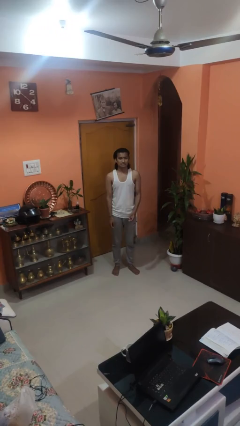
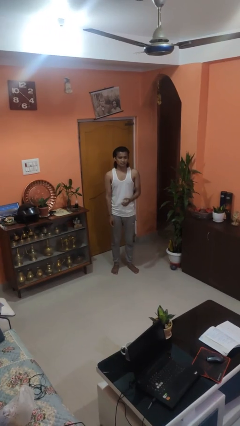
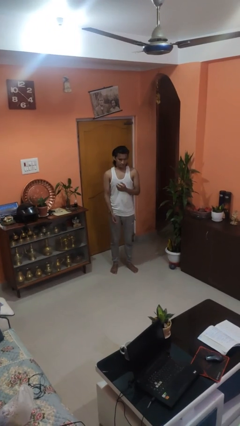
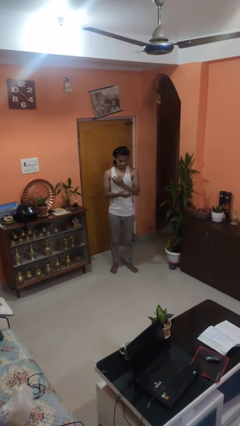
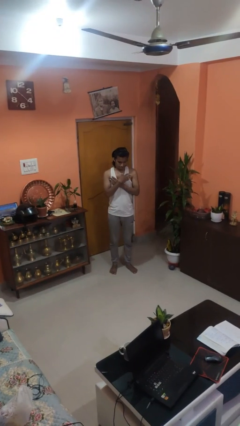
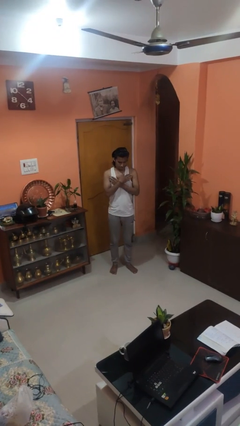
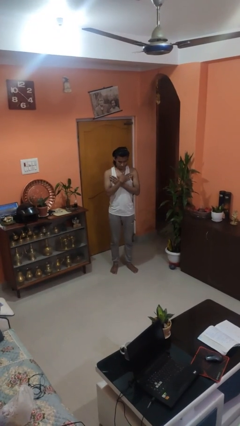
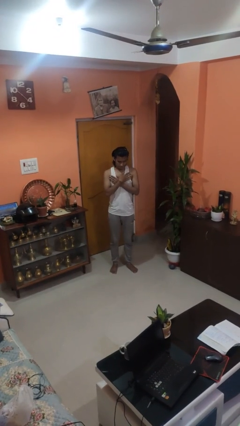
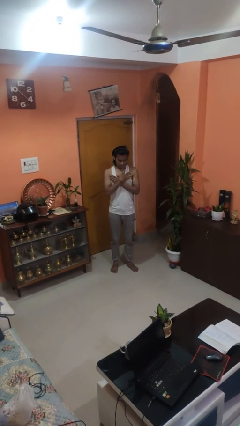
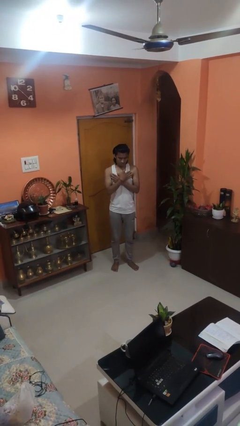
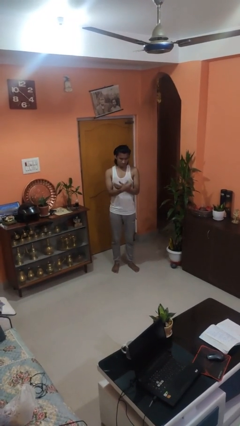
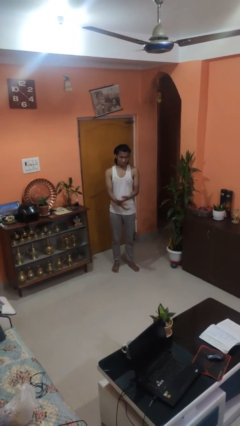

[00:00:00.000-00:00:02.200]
person drums on chest

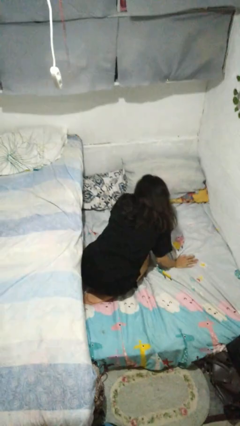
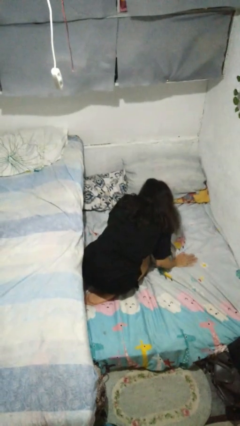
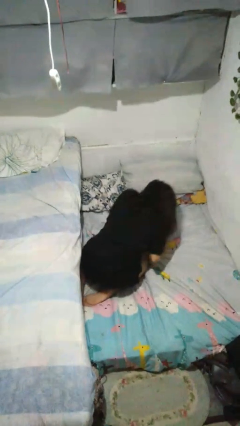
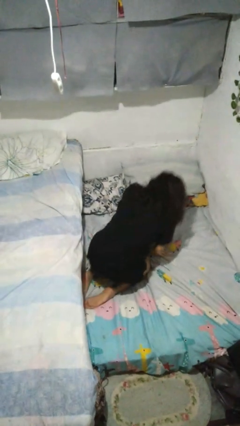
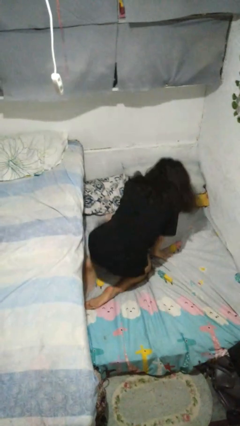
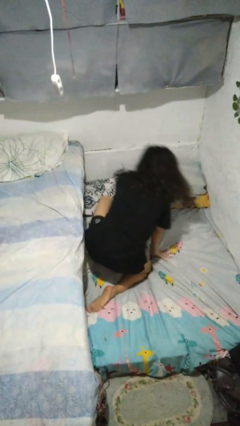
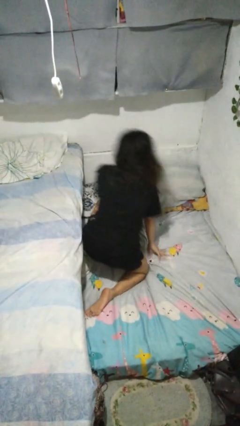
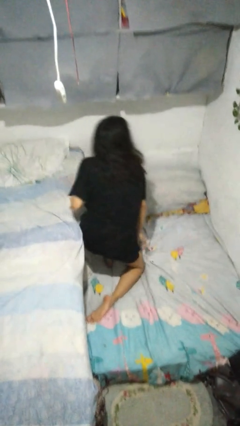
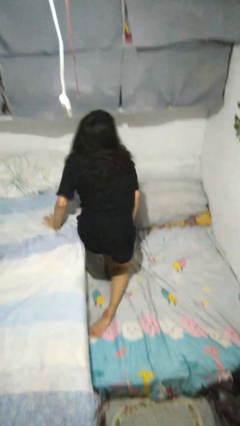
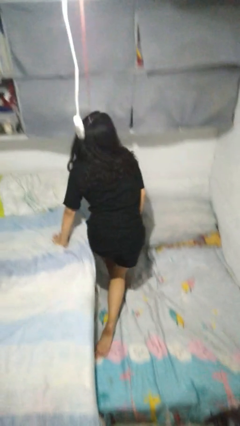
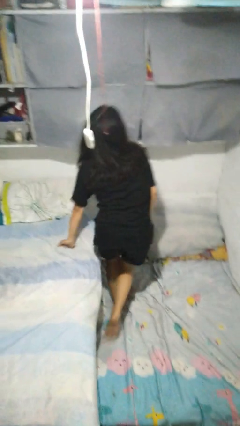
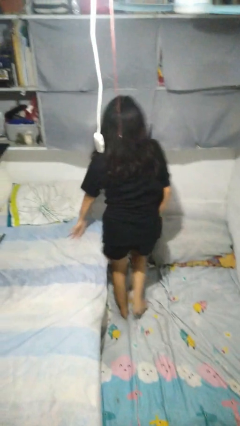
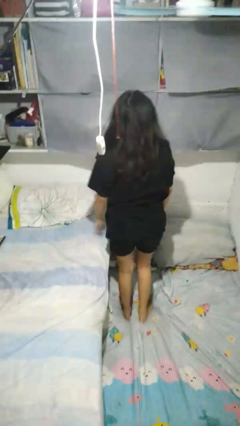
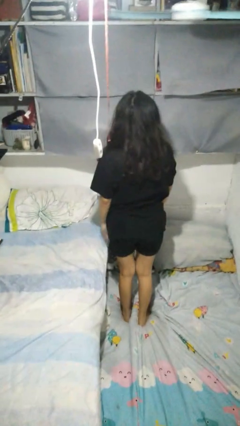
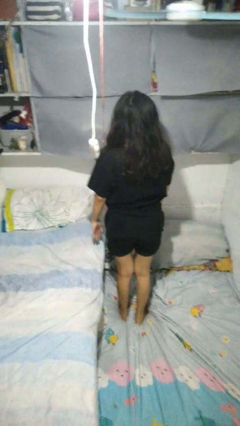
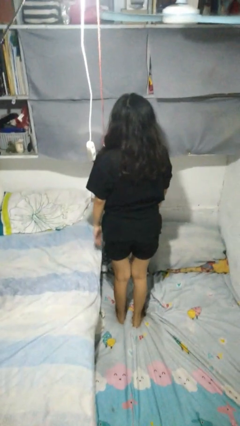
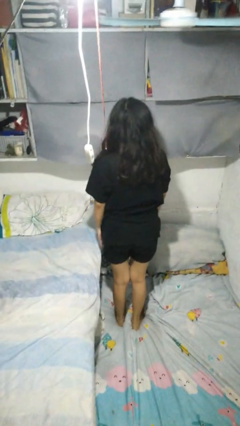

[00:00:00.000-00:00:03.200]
person stands up from floor

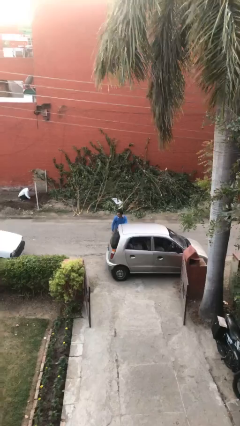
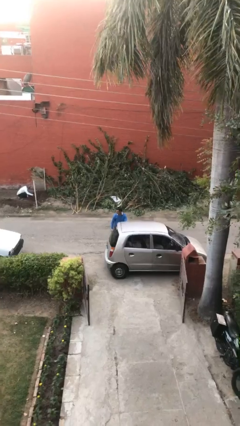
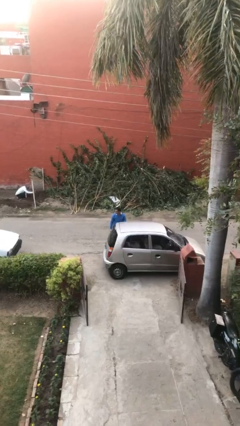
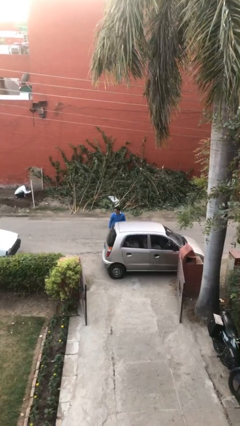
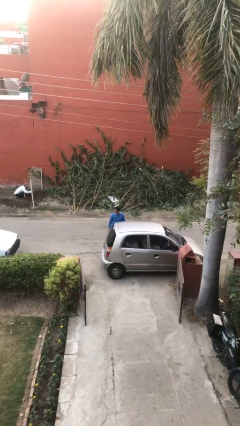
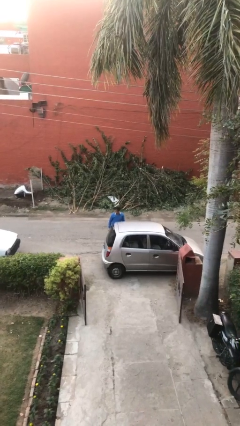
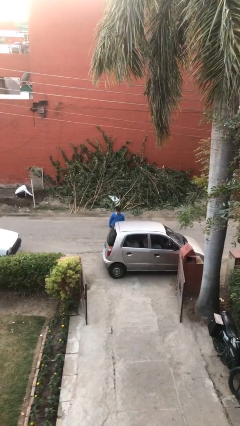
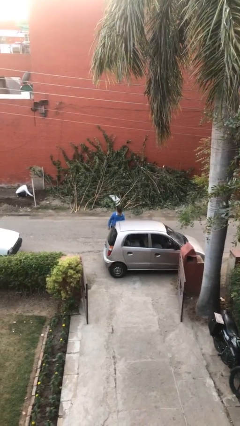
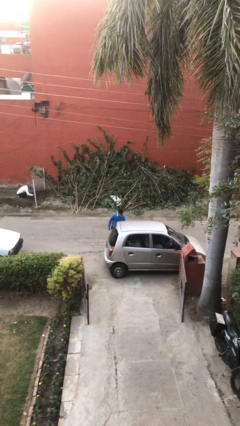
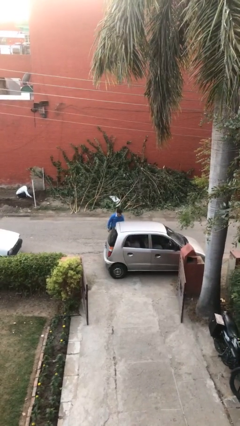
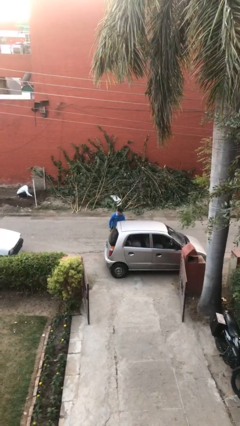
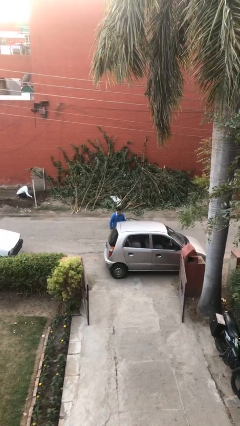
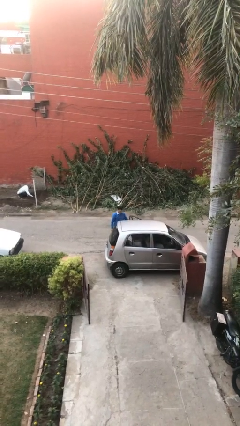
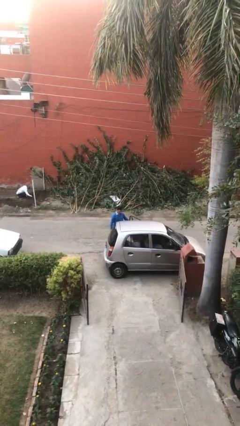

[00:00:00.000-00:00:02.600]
person opens car door

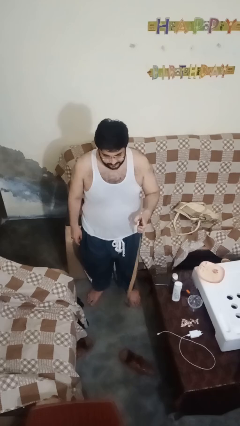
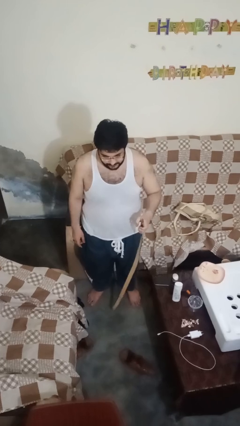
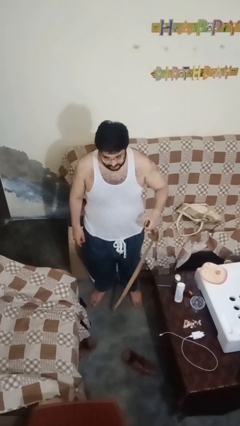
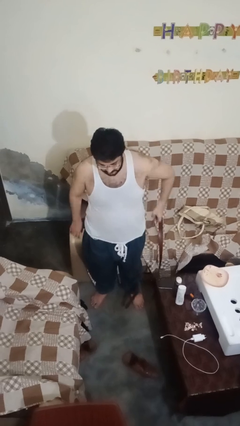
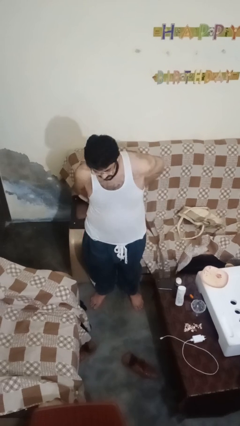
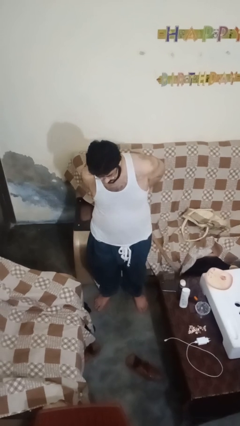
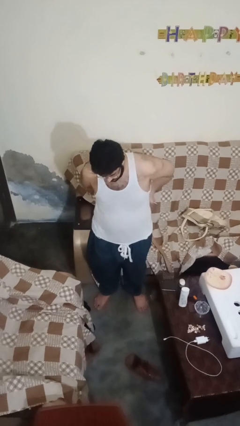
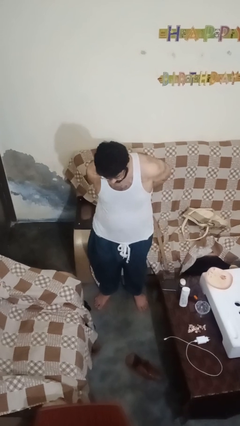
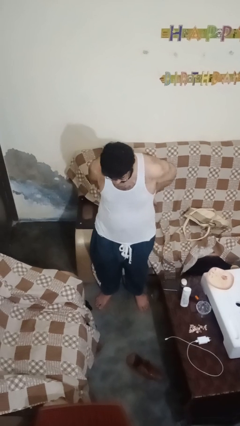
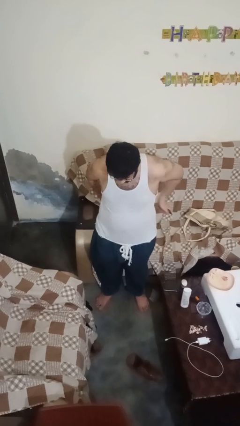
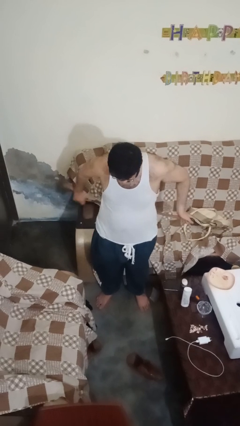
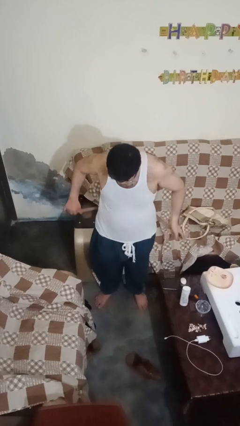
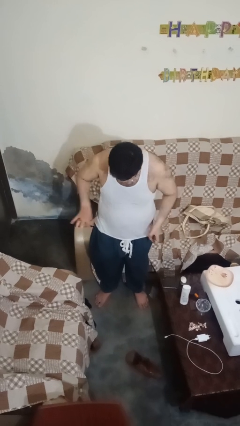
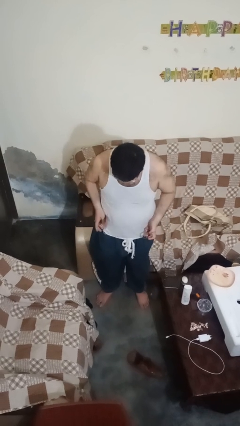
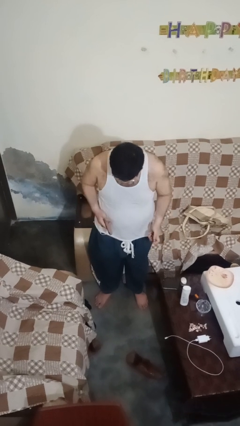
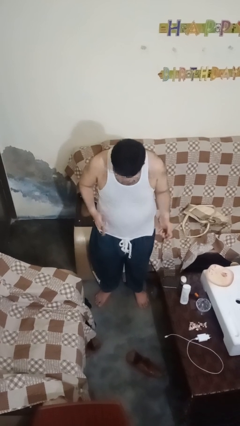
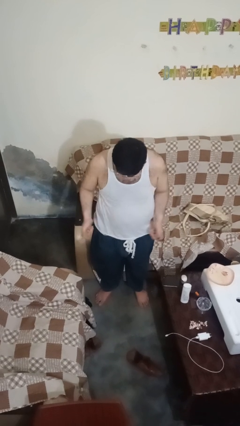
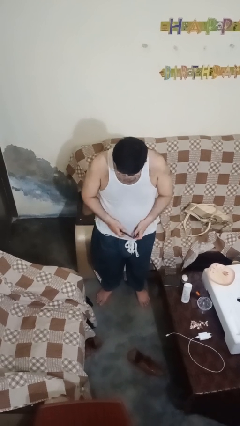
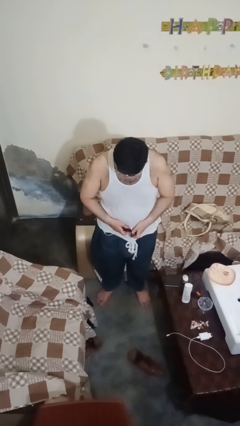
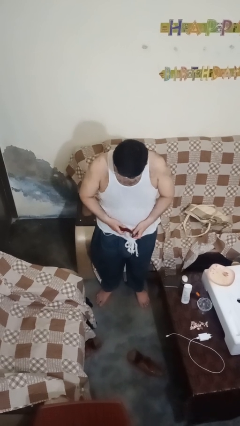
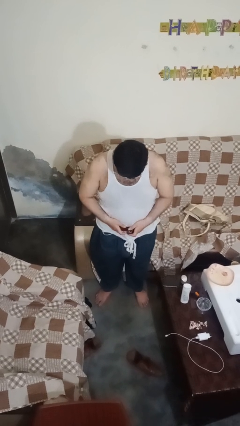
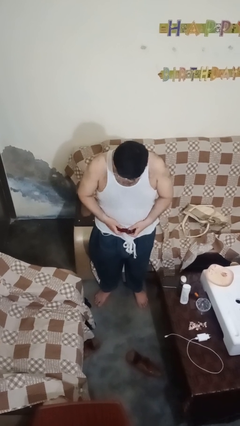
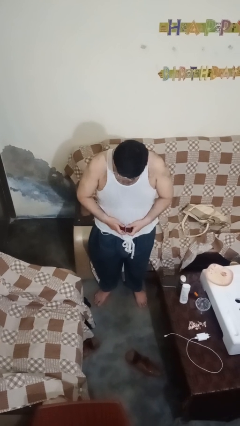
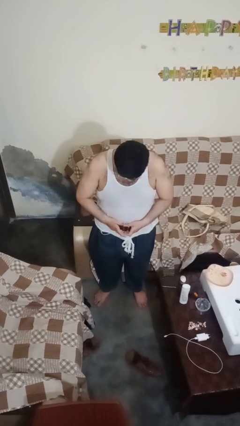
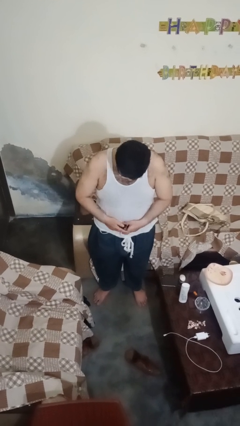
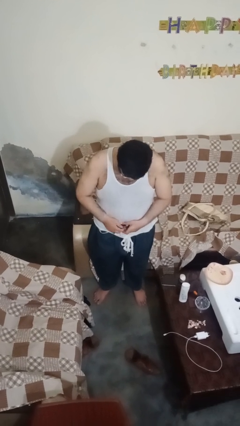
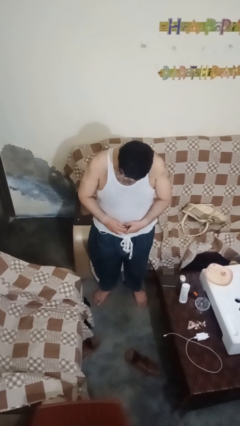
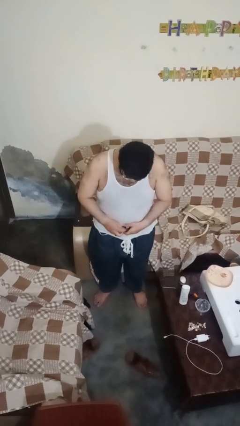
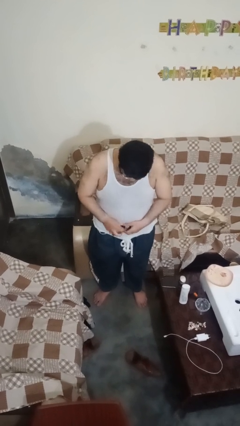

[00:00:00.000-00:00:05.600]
person puts on belt

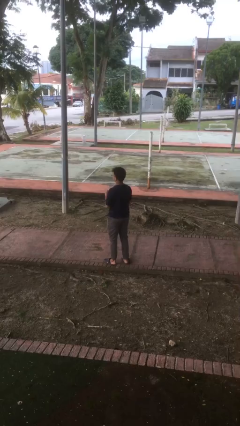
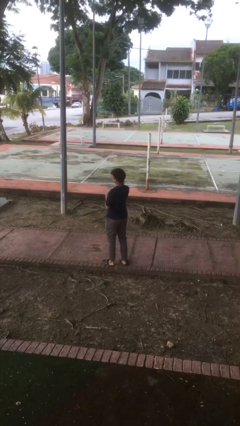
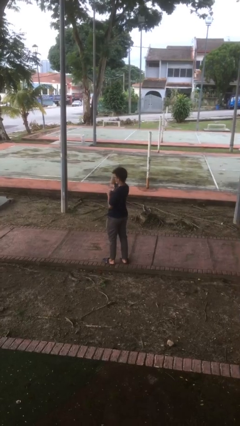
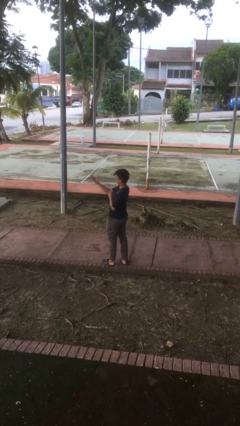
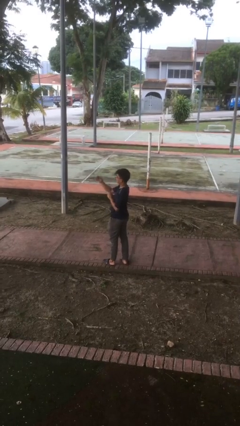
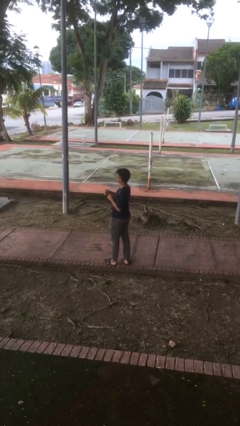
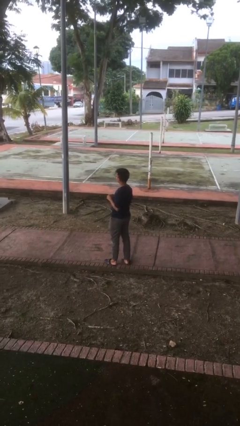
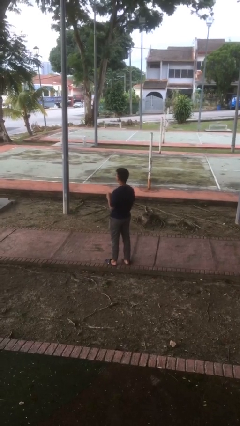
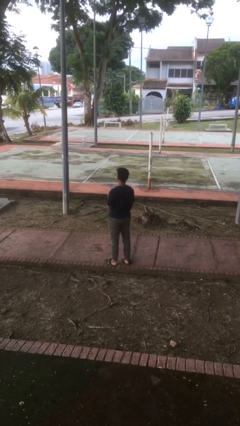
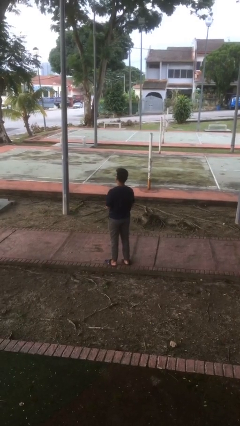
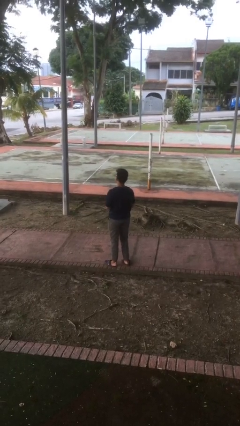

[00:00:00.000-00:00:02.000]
person karate chop

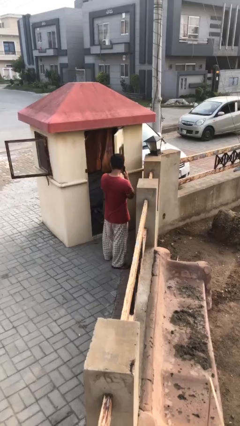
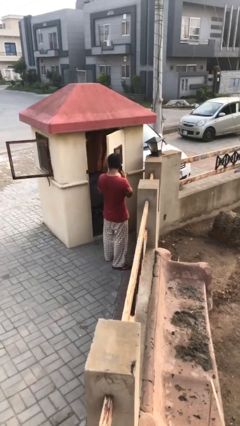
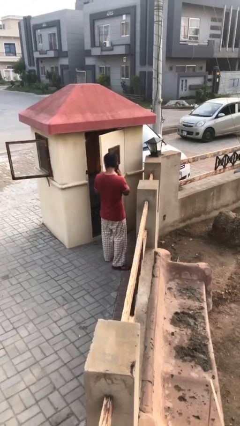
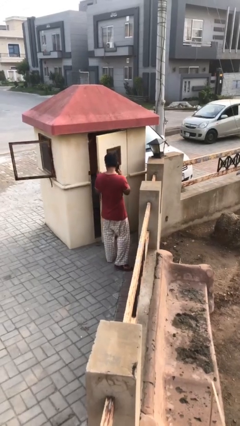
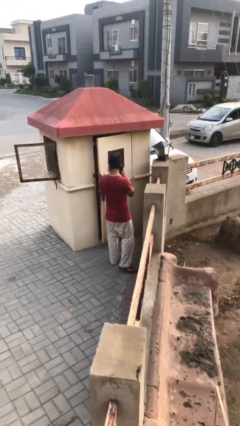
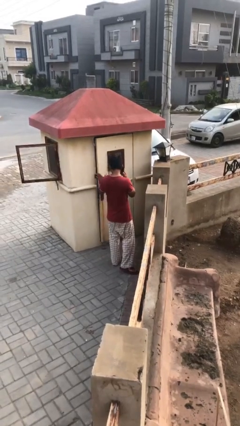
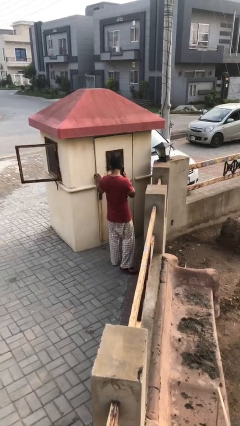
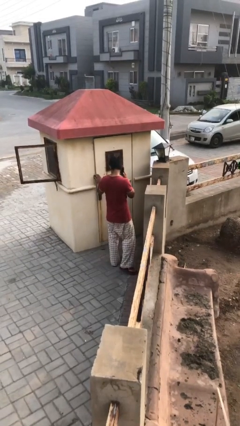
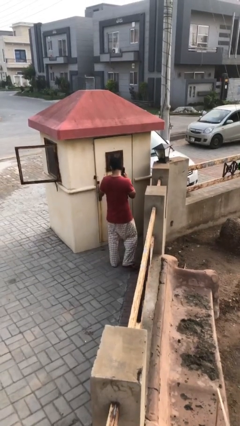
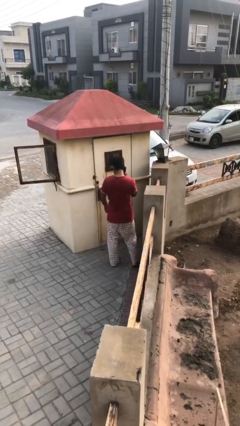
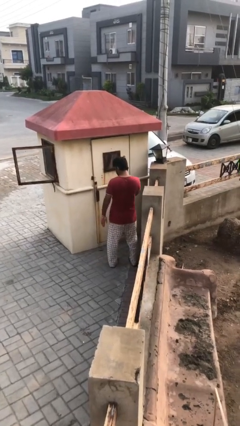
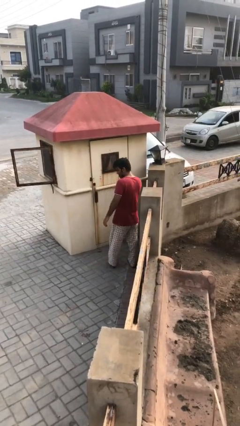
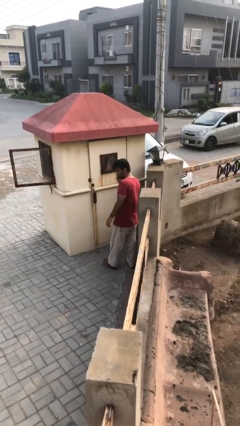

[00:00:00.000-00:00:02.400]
person closes facility door
